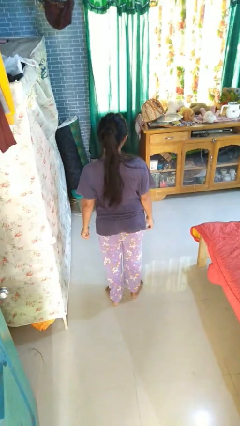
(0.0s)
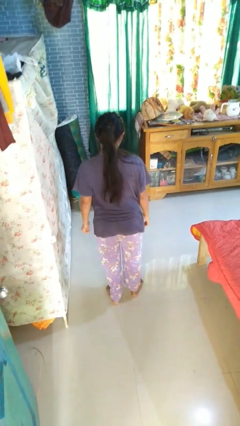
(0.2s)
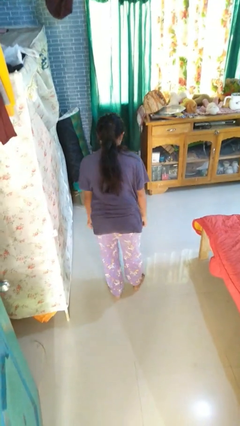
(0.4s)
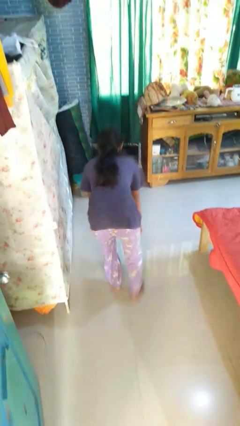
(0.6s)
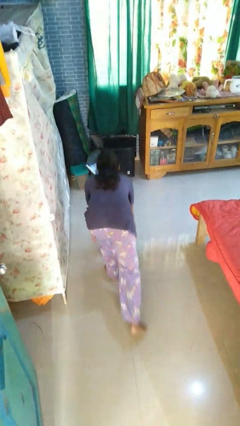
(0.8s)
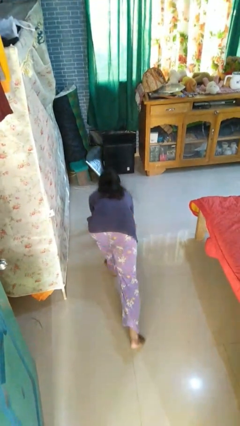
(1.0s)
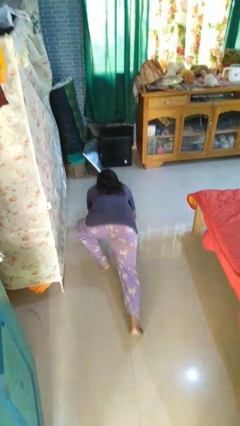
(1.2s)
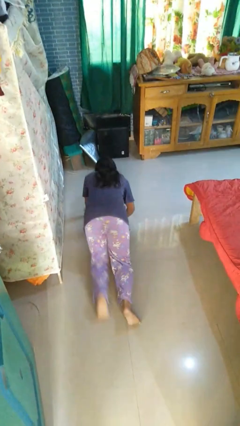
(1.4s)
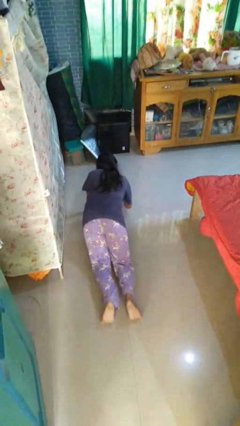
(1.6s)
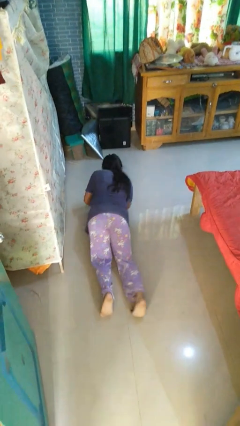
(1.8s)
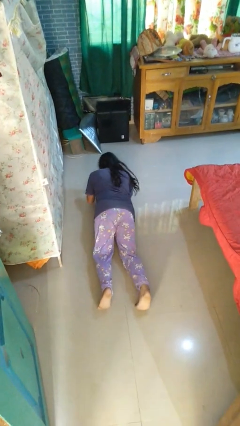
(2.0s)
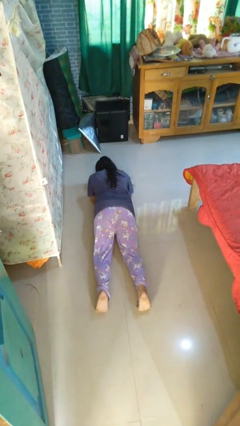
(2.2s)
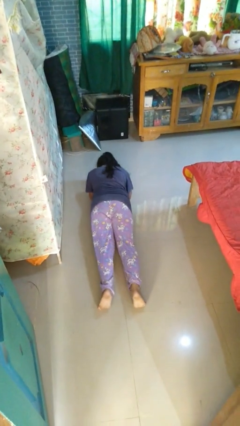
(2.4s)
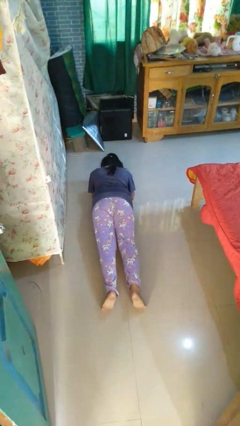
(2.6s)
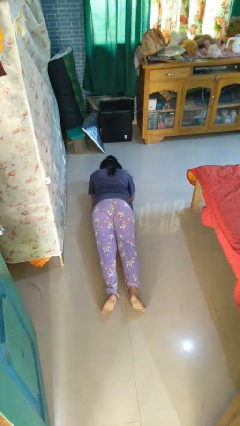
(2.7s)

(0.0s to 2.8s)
person exercises with plank

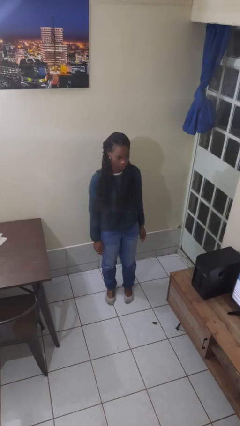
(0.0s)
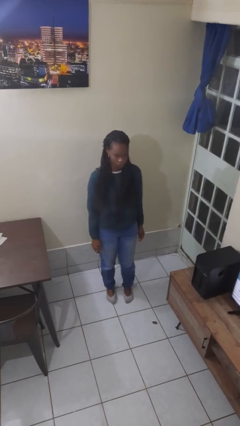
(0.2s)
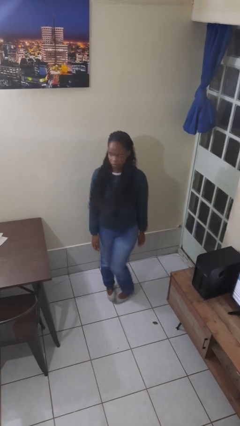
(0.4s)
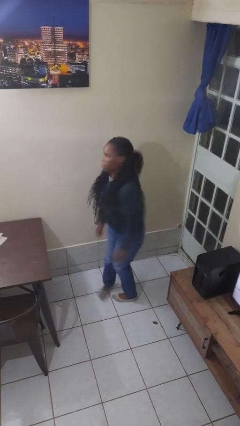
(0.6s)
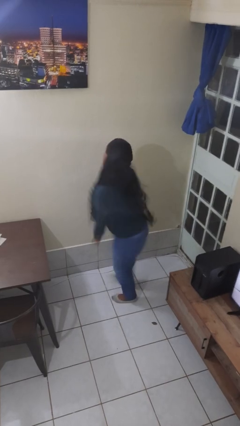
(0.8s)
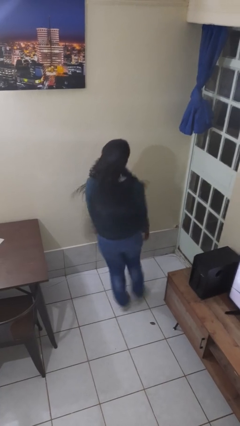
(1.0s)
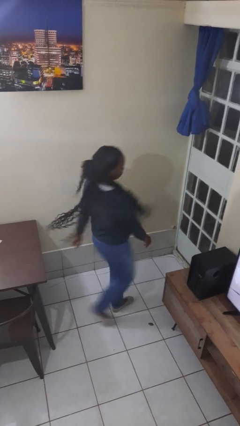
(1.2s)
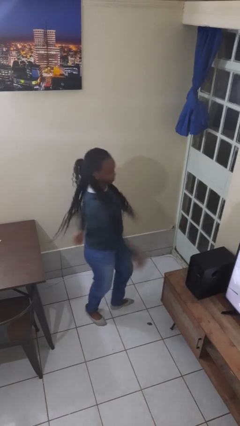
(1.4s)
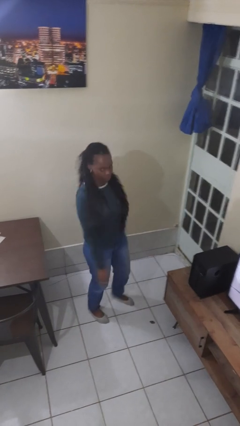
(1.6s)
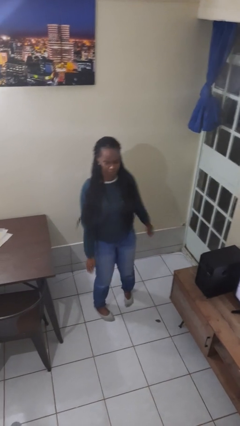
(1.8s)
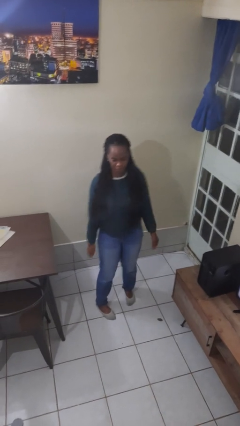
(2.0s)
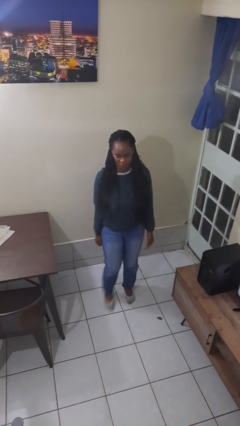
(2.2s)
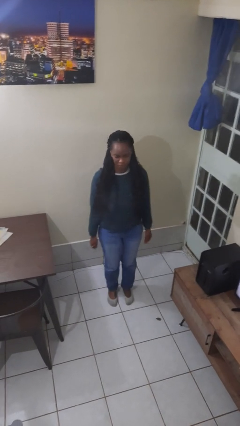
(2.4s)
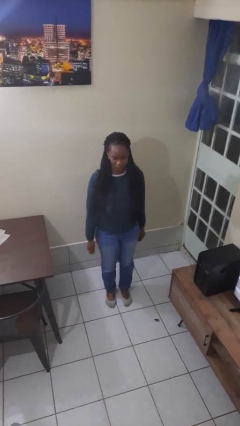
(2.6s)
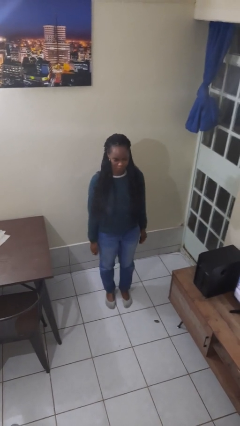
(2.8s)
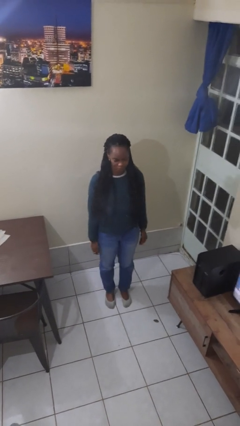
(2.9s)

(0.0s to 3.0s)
person twirls

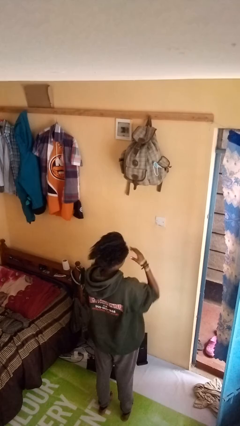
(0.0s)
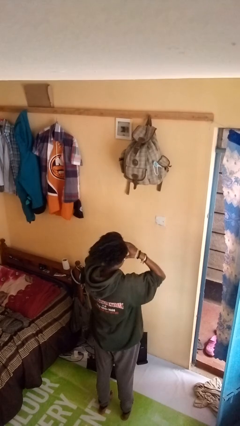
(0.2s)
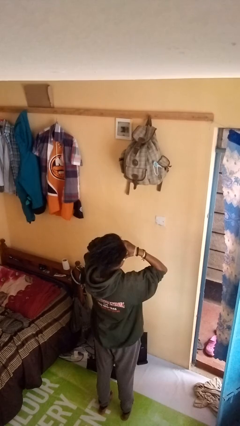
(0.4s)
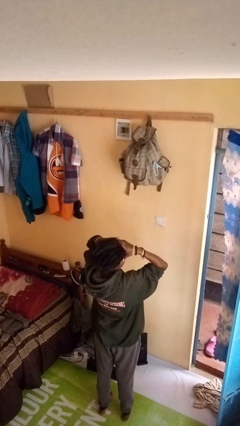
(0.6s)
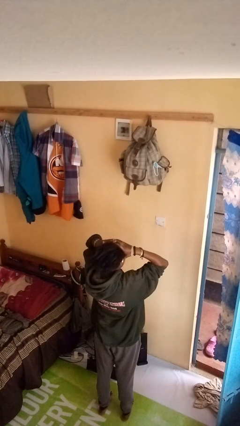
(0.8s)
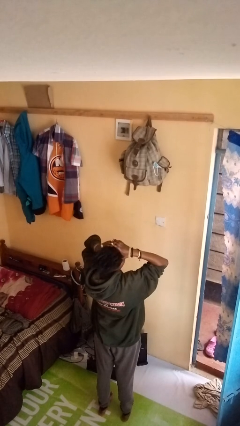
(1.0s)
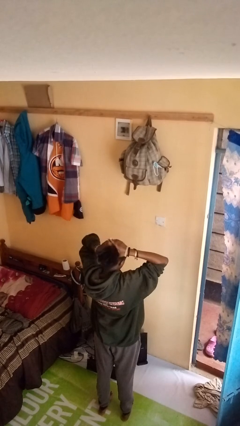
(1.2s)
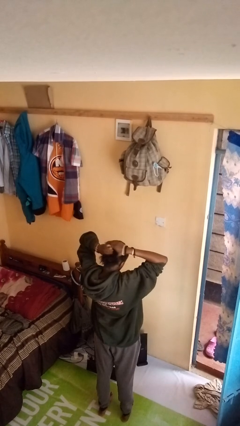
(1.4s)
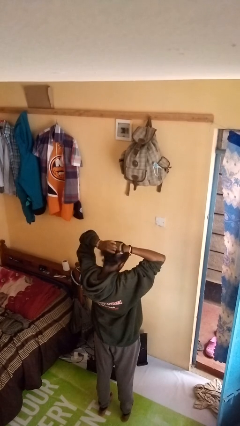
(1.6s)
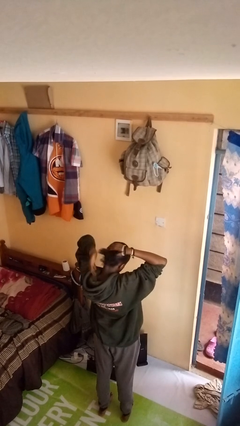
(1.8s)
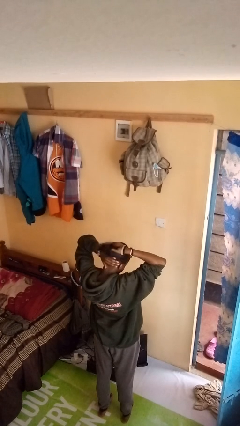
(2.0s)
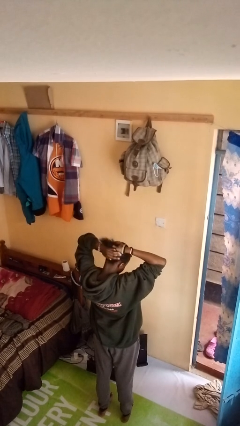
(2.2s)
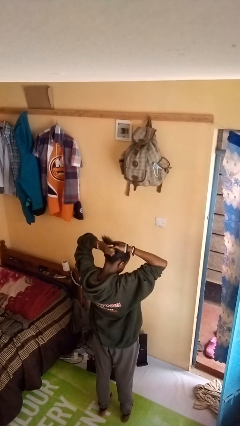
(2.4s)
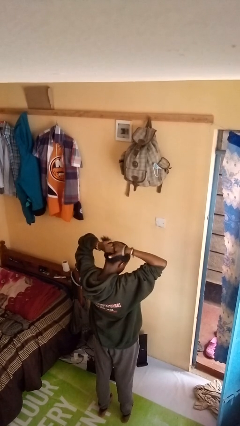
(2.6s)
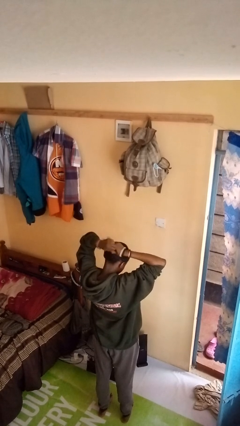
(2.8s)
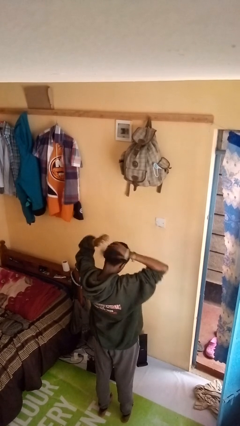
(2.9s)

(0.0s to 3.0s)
person strokes hair

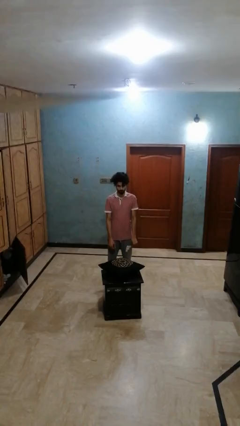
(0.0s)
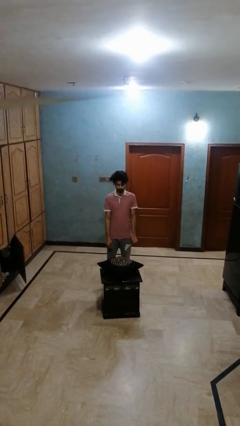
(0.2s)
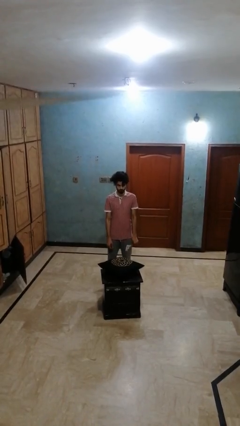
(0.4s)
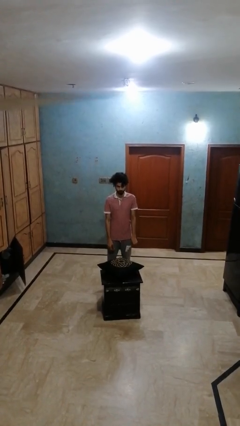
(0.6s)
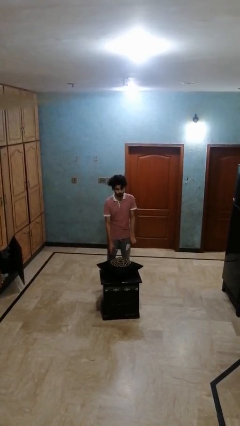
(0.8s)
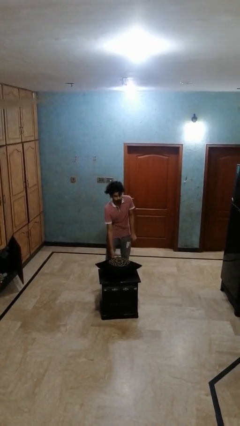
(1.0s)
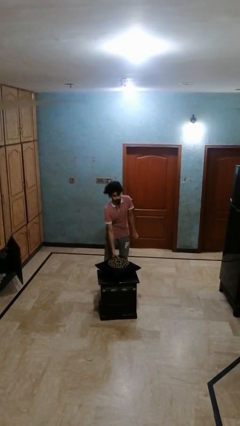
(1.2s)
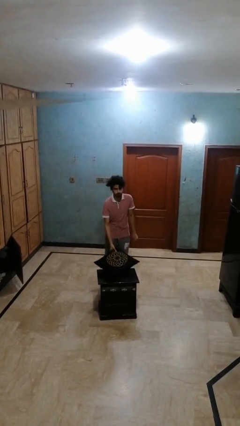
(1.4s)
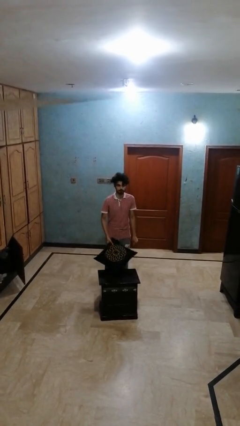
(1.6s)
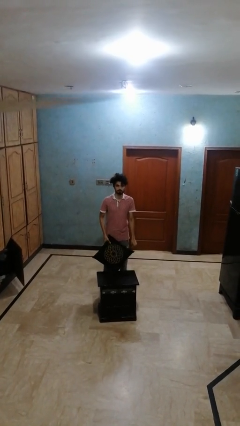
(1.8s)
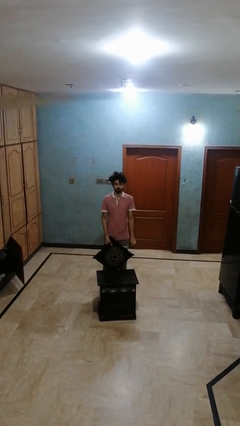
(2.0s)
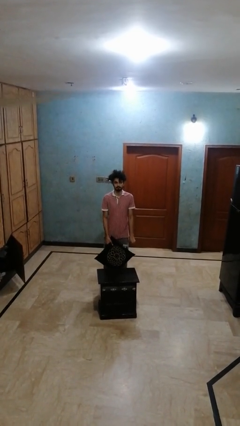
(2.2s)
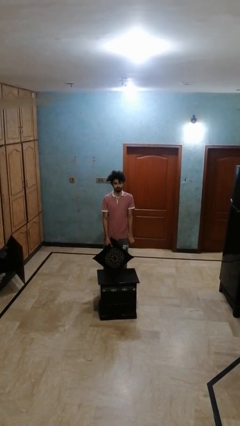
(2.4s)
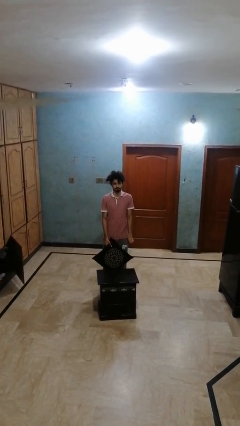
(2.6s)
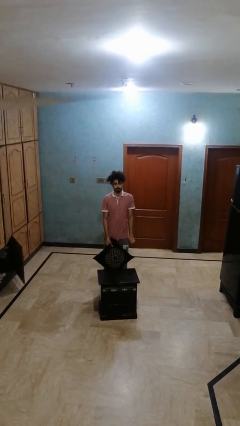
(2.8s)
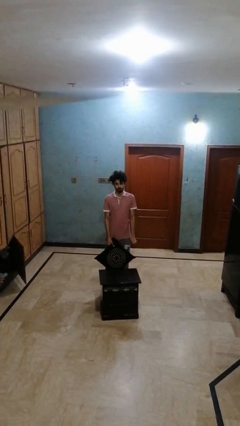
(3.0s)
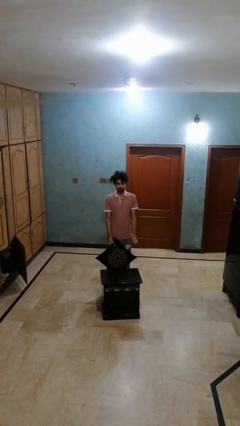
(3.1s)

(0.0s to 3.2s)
person picks up object from table

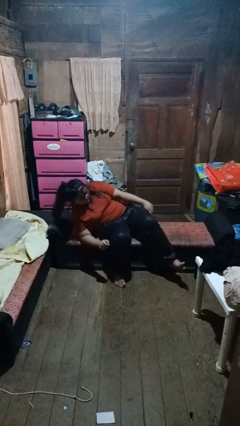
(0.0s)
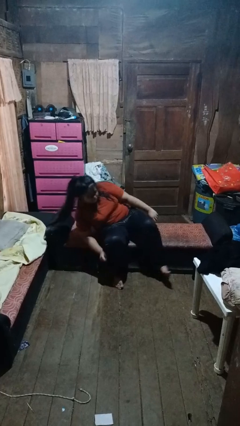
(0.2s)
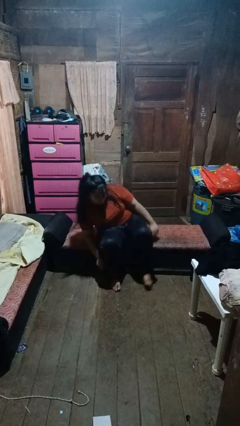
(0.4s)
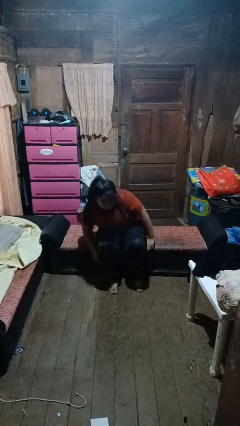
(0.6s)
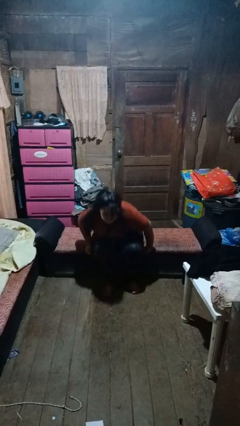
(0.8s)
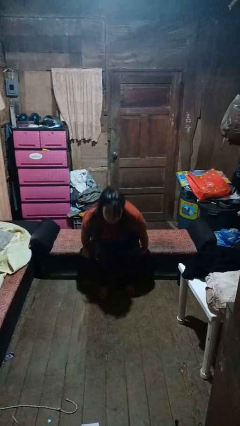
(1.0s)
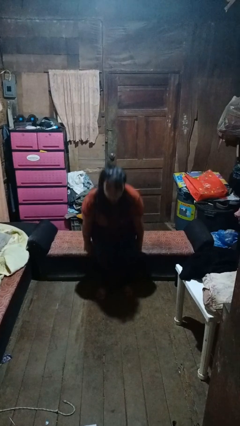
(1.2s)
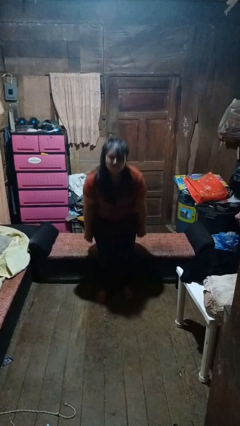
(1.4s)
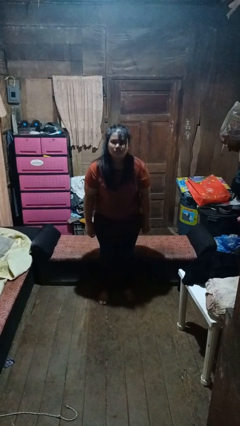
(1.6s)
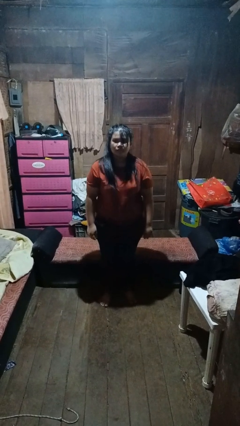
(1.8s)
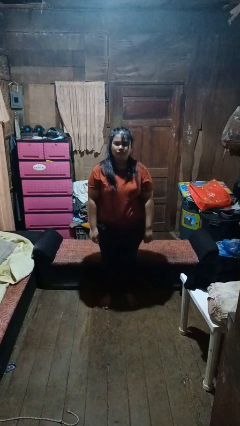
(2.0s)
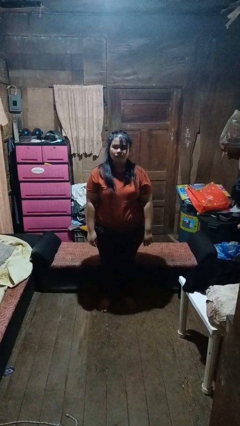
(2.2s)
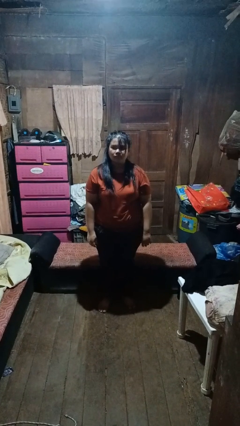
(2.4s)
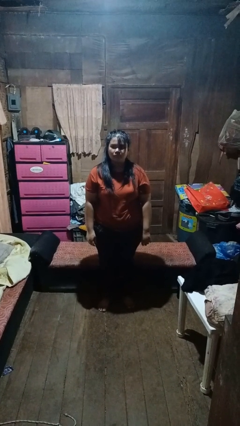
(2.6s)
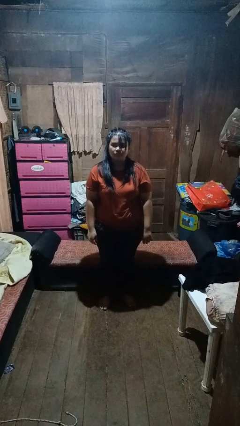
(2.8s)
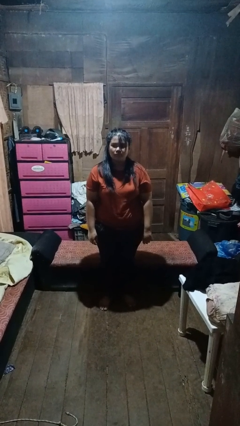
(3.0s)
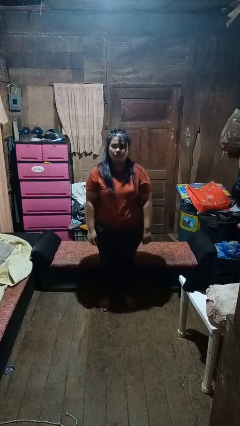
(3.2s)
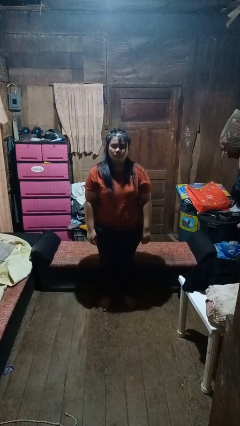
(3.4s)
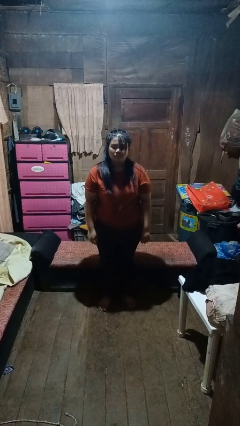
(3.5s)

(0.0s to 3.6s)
person stands up

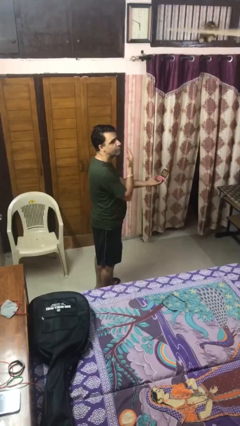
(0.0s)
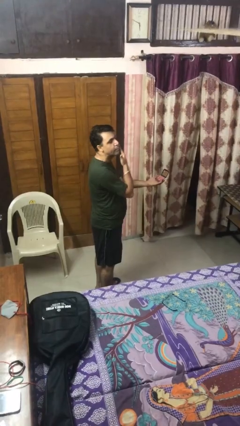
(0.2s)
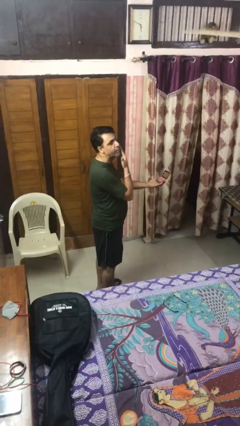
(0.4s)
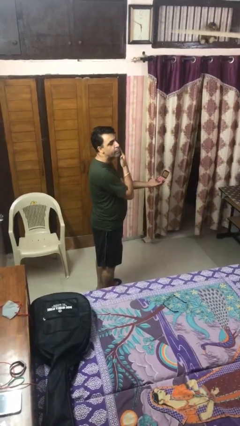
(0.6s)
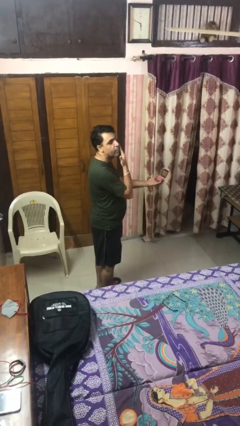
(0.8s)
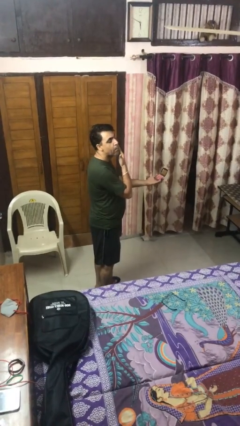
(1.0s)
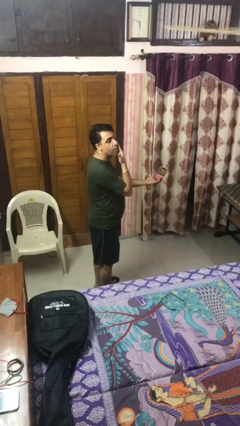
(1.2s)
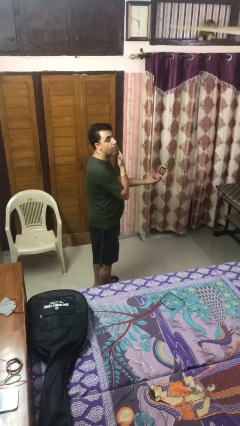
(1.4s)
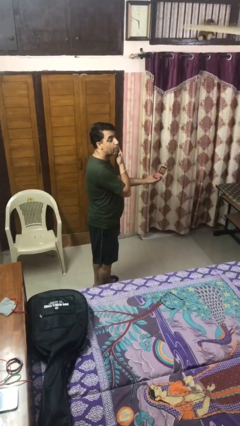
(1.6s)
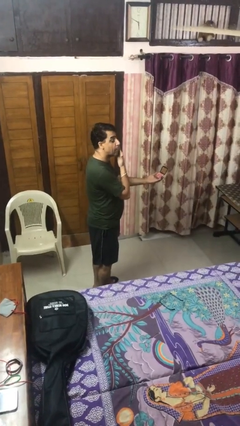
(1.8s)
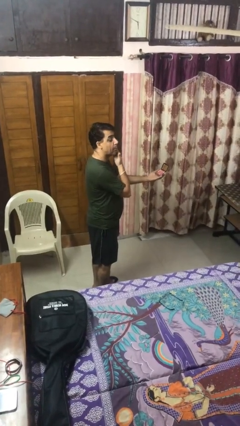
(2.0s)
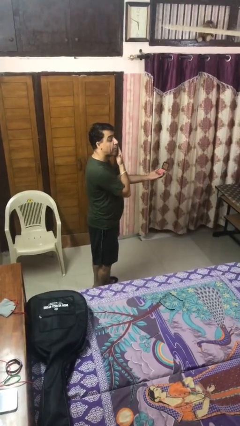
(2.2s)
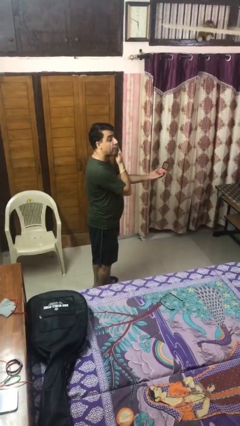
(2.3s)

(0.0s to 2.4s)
person applies foundation makeup
